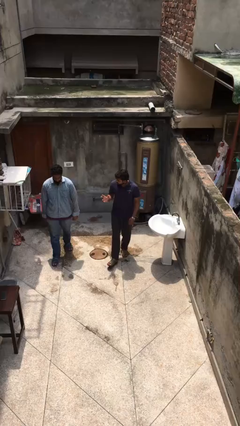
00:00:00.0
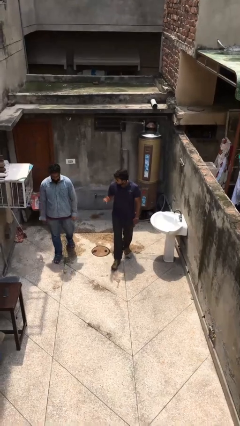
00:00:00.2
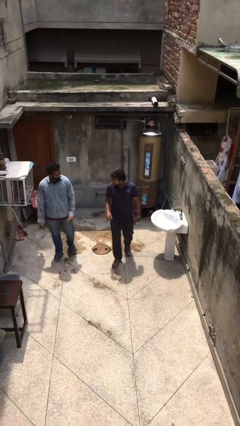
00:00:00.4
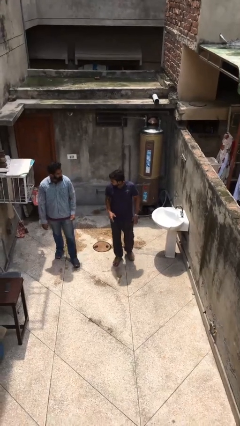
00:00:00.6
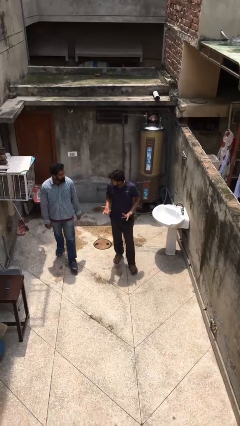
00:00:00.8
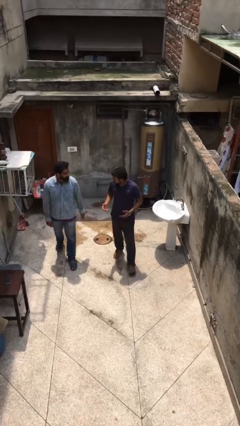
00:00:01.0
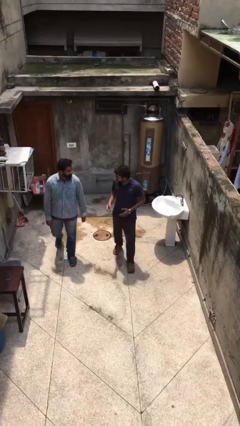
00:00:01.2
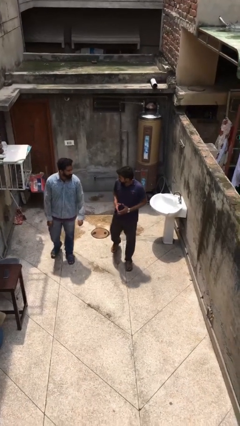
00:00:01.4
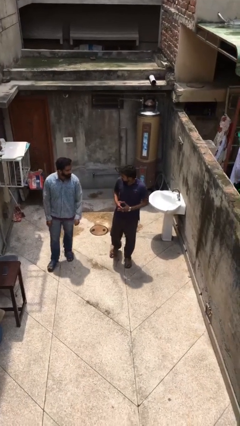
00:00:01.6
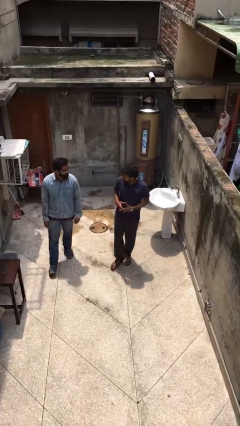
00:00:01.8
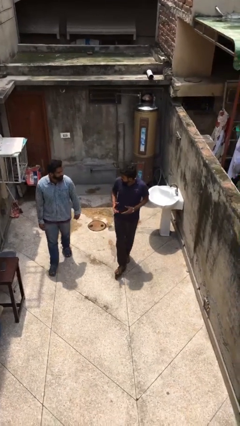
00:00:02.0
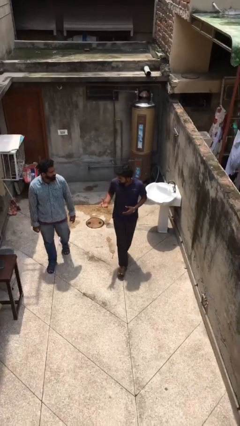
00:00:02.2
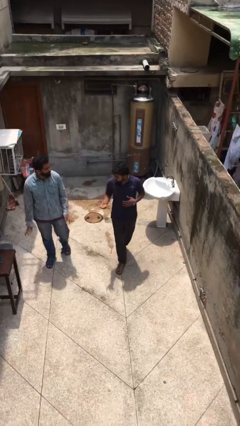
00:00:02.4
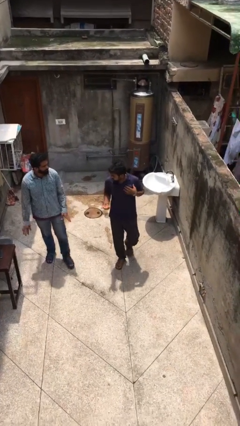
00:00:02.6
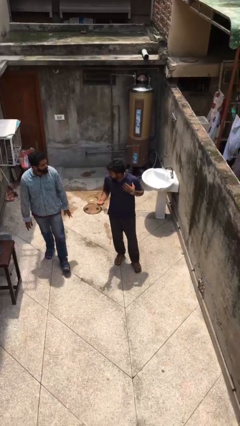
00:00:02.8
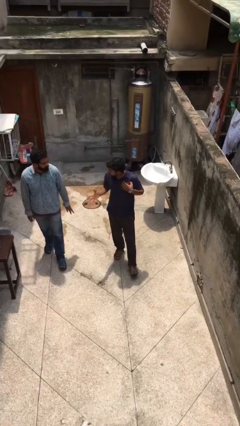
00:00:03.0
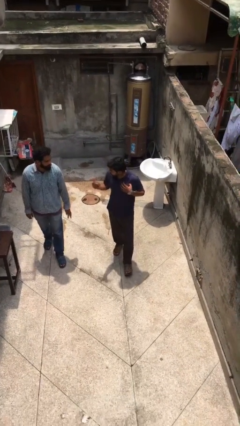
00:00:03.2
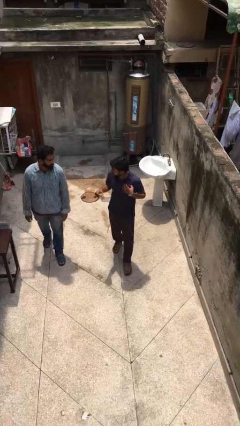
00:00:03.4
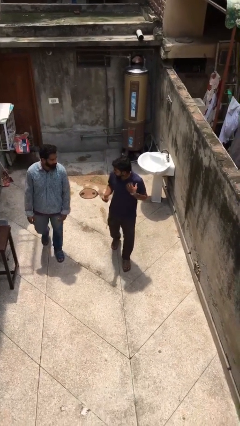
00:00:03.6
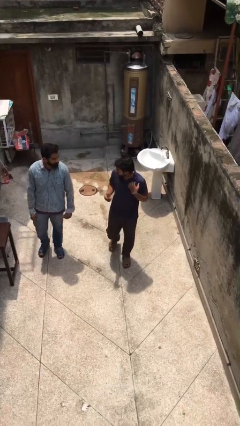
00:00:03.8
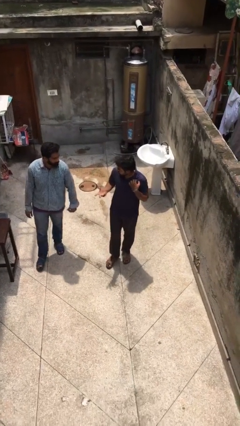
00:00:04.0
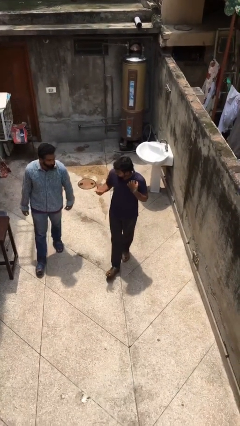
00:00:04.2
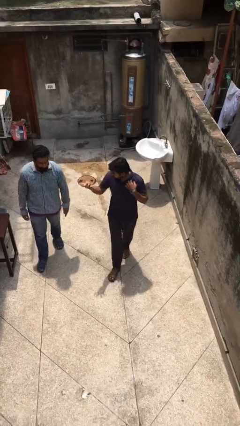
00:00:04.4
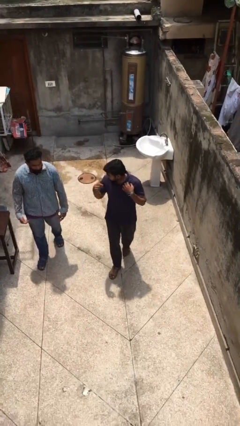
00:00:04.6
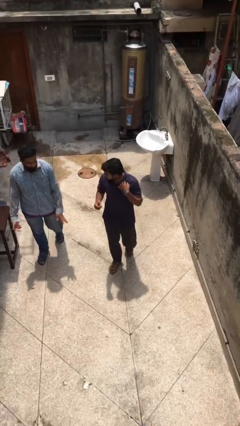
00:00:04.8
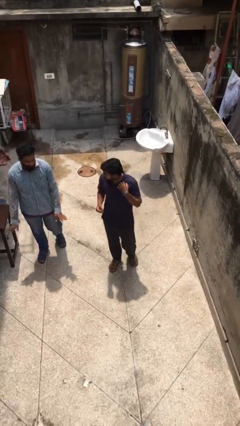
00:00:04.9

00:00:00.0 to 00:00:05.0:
person talks to person

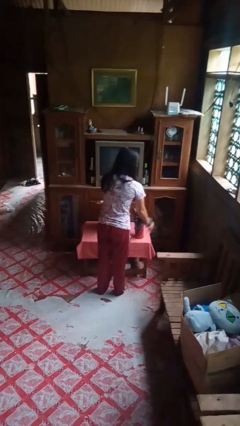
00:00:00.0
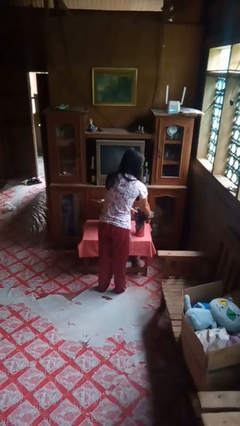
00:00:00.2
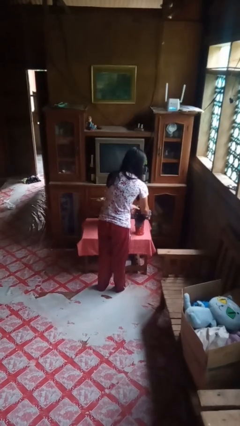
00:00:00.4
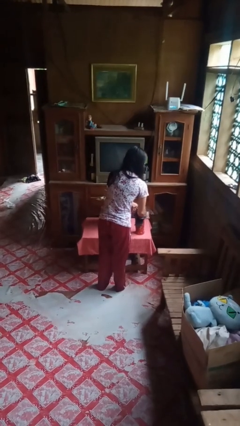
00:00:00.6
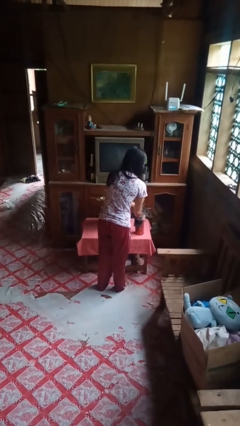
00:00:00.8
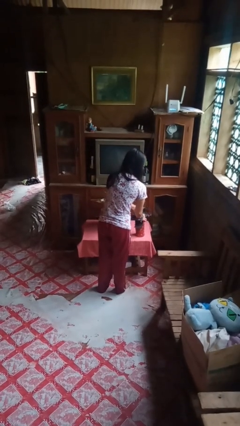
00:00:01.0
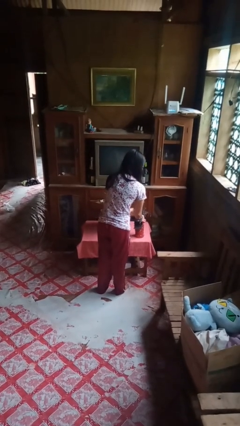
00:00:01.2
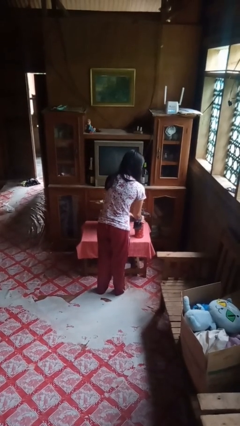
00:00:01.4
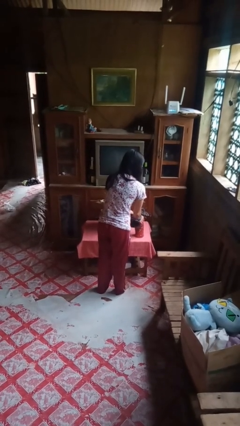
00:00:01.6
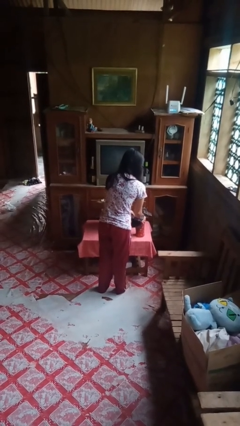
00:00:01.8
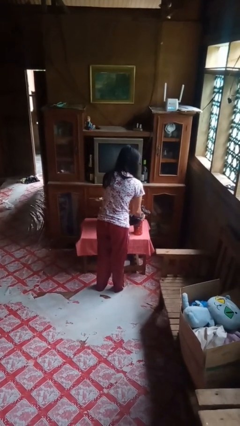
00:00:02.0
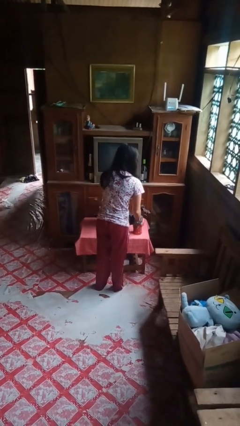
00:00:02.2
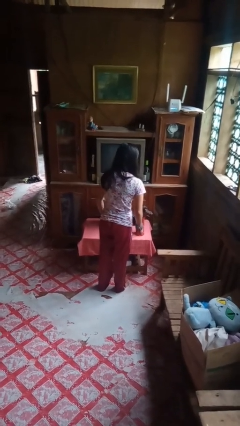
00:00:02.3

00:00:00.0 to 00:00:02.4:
person arranges flowers in vase

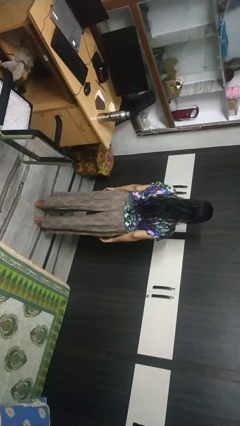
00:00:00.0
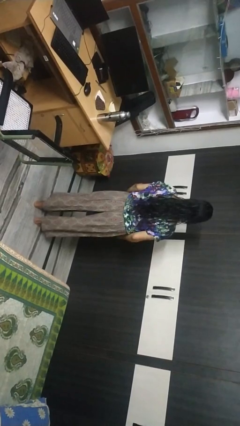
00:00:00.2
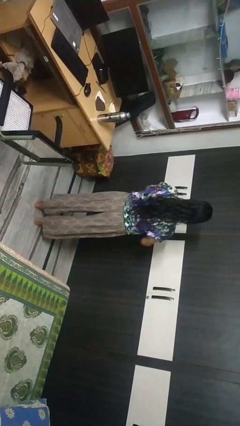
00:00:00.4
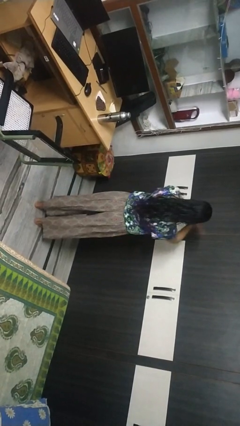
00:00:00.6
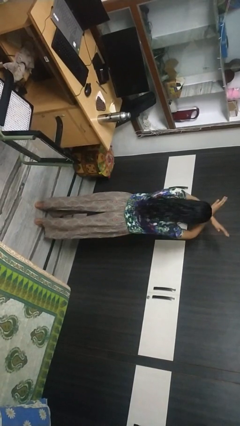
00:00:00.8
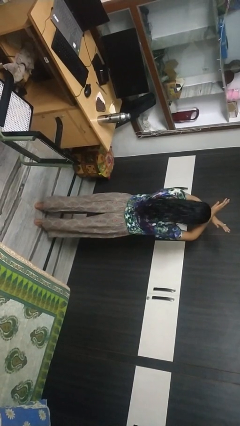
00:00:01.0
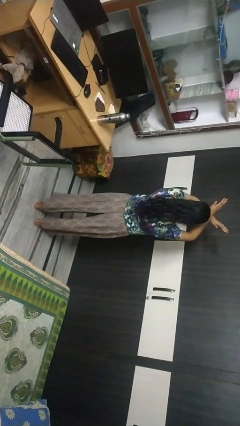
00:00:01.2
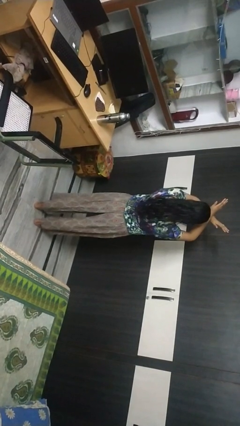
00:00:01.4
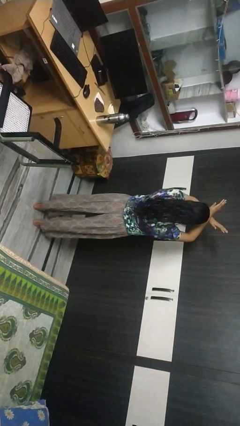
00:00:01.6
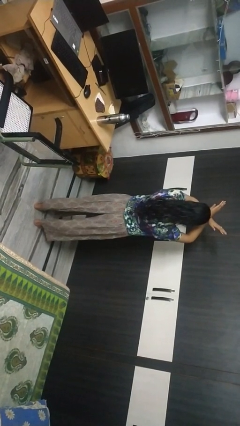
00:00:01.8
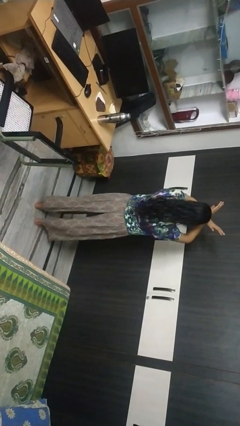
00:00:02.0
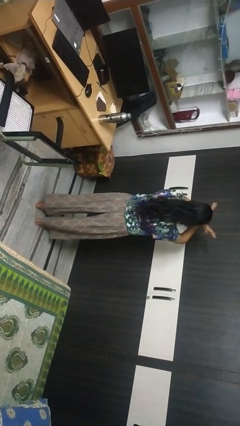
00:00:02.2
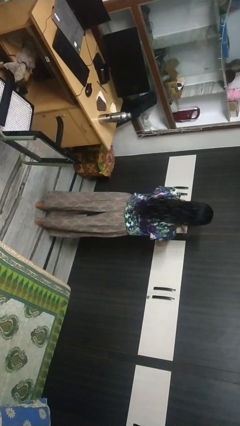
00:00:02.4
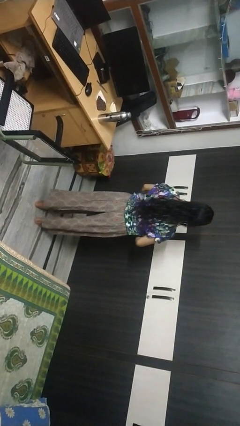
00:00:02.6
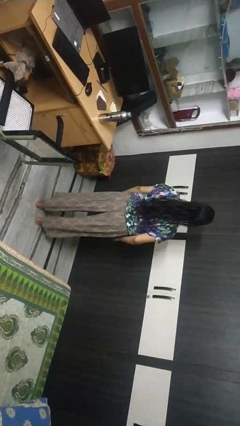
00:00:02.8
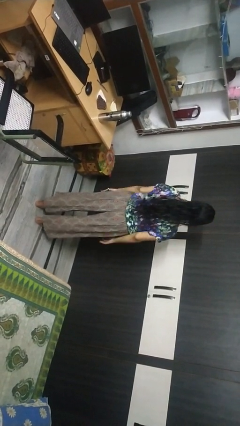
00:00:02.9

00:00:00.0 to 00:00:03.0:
person gestures arms x

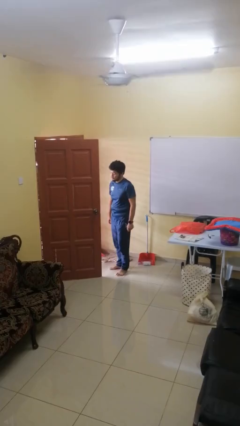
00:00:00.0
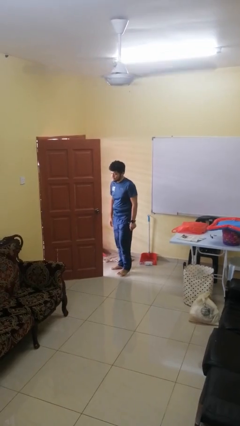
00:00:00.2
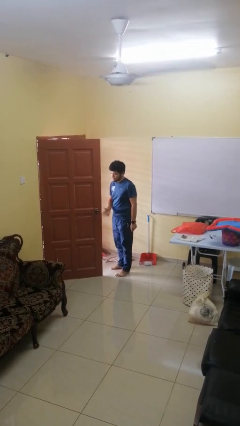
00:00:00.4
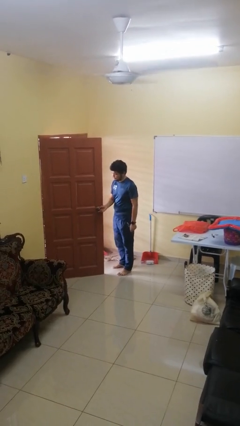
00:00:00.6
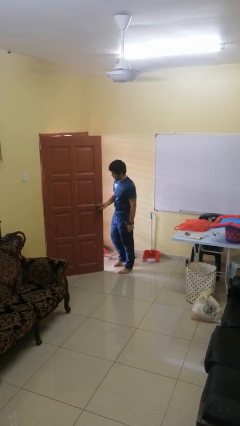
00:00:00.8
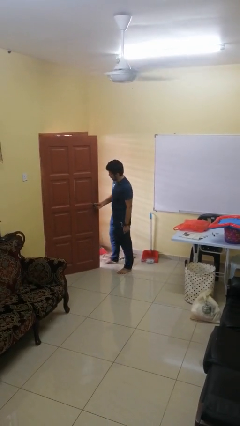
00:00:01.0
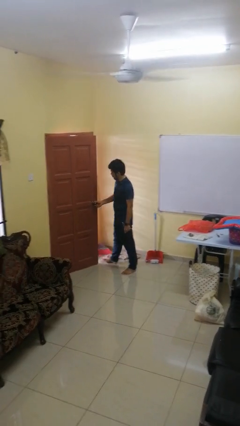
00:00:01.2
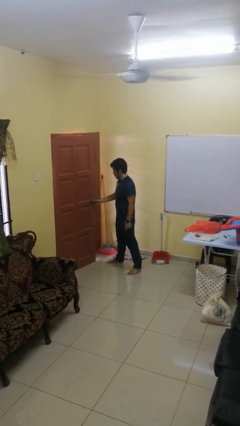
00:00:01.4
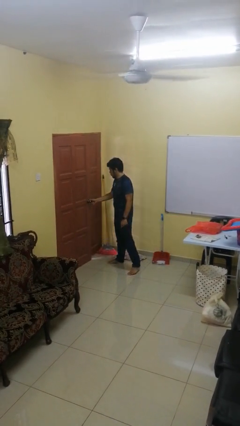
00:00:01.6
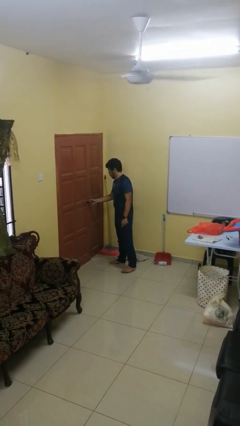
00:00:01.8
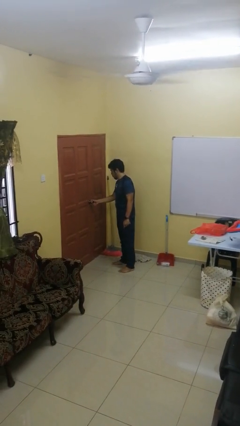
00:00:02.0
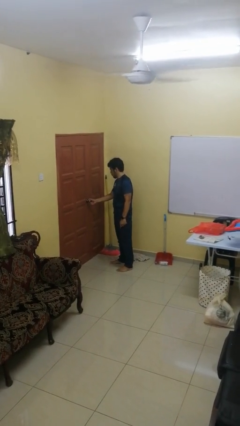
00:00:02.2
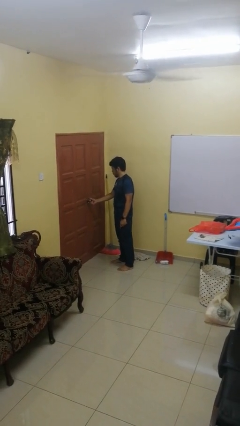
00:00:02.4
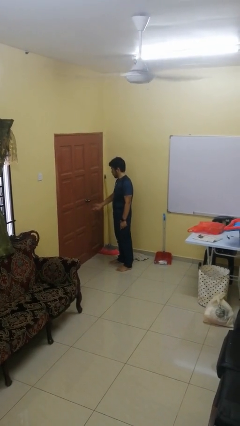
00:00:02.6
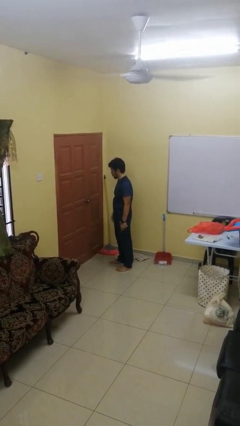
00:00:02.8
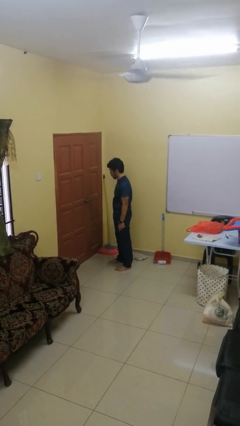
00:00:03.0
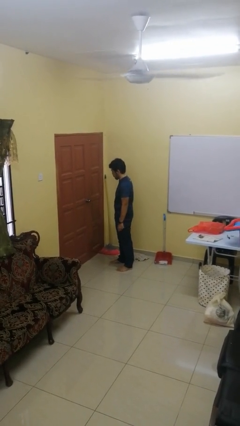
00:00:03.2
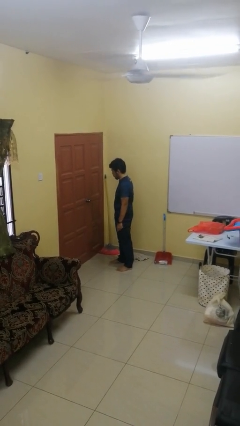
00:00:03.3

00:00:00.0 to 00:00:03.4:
person closes facility door

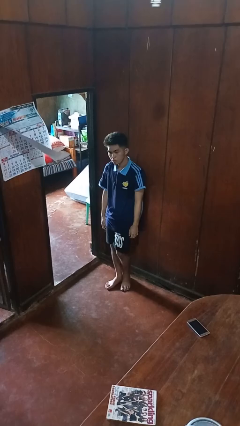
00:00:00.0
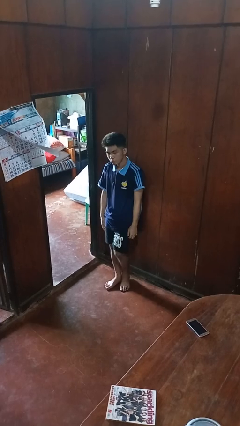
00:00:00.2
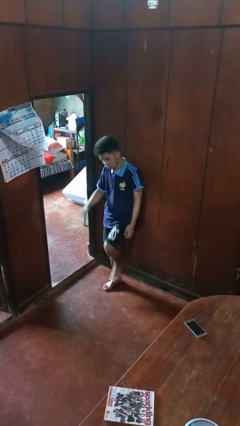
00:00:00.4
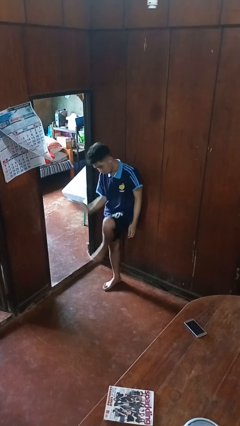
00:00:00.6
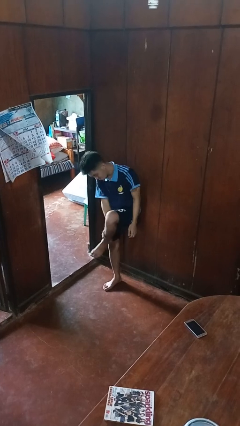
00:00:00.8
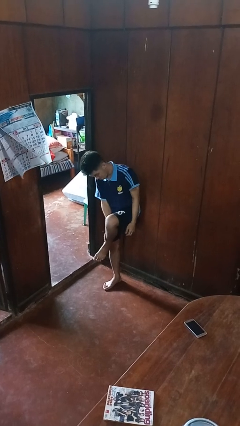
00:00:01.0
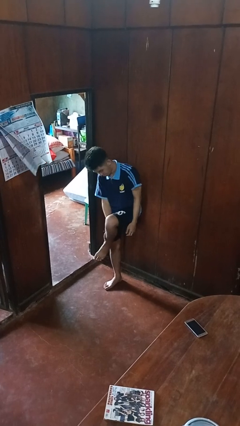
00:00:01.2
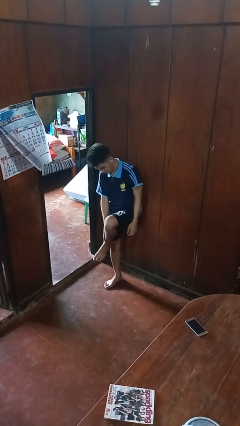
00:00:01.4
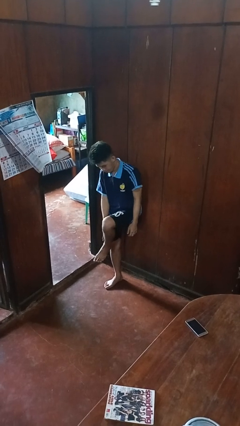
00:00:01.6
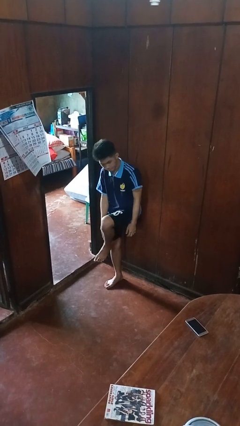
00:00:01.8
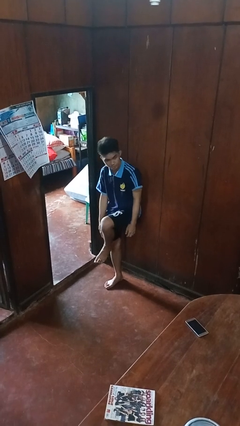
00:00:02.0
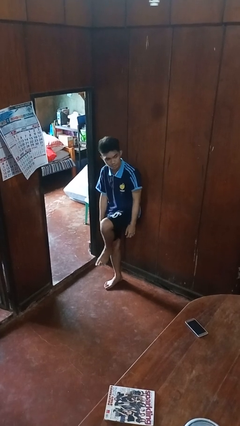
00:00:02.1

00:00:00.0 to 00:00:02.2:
person swats bug

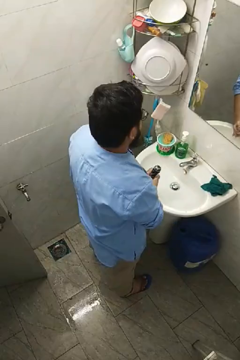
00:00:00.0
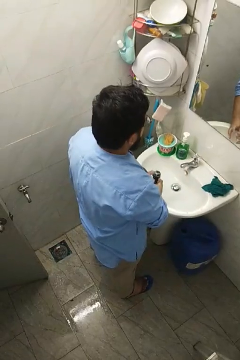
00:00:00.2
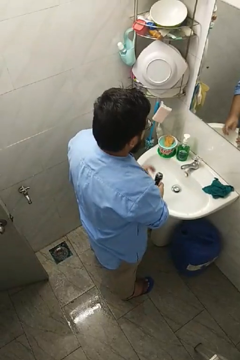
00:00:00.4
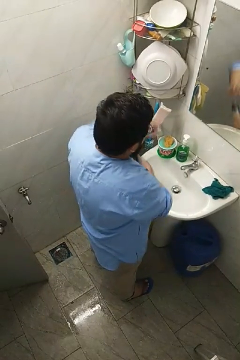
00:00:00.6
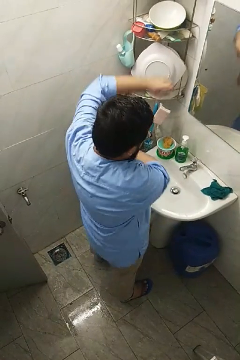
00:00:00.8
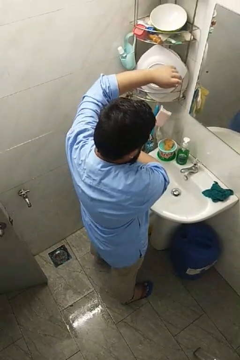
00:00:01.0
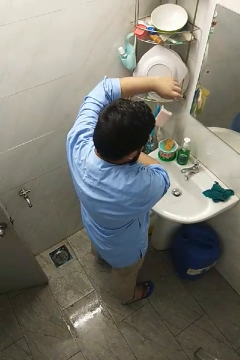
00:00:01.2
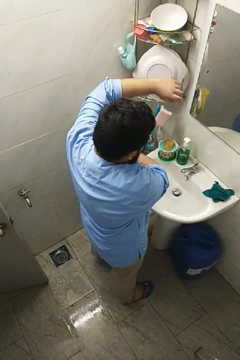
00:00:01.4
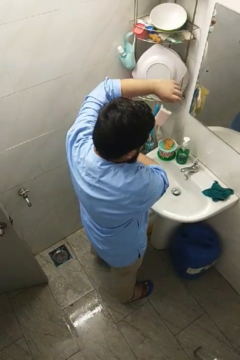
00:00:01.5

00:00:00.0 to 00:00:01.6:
person applies deodorant
